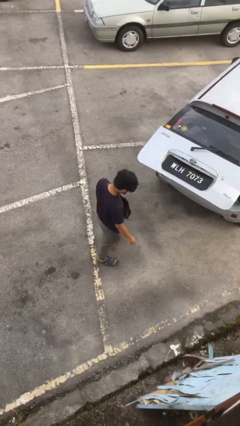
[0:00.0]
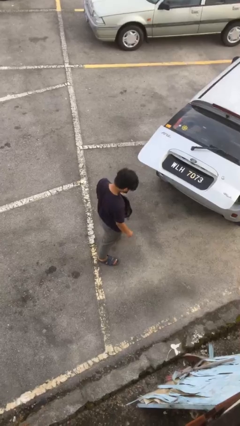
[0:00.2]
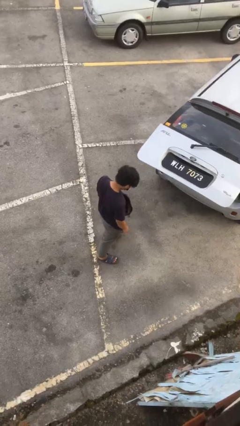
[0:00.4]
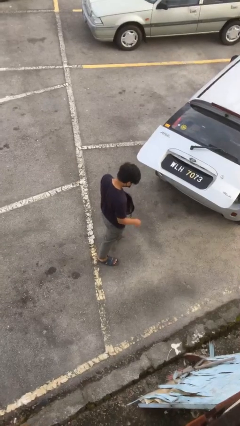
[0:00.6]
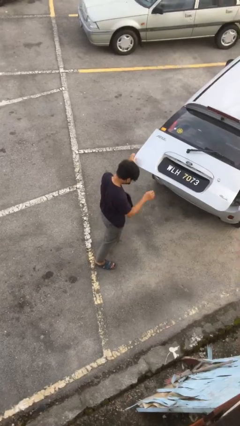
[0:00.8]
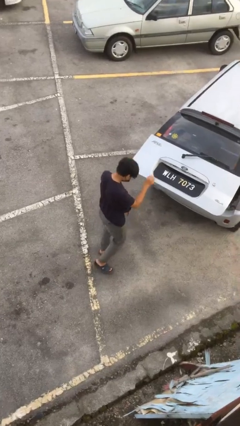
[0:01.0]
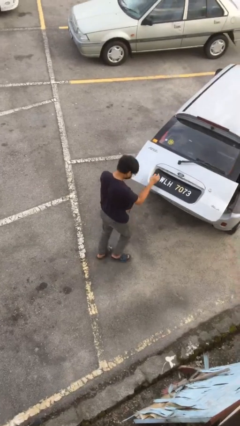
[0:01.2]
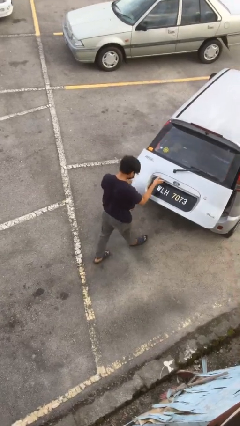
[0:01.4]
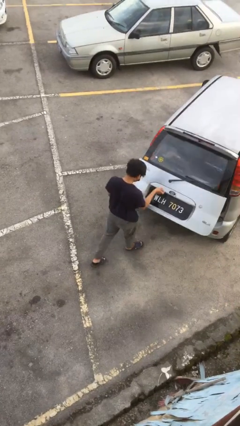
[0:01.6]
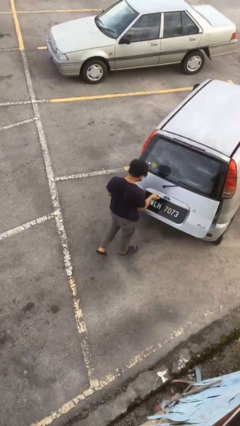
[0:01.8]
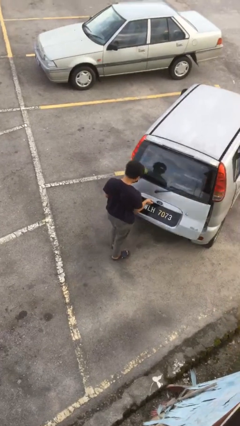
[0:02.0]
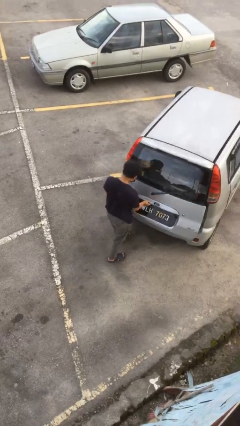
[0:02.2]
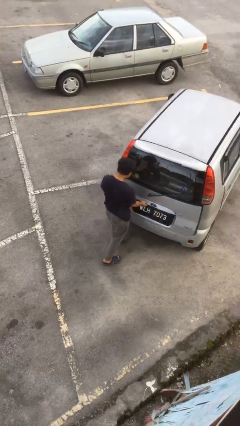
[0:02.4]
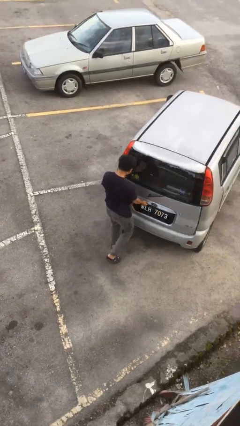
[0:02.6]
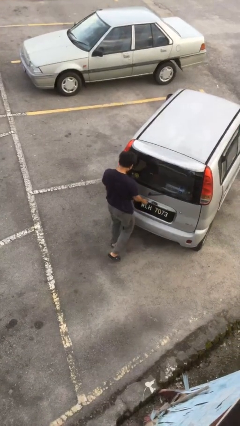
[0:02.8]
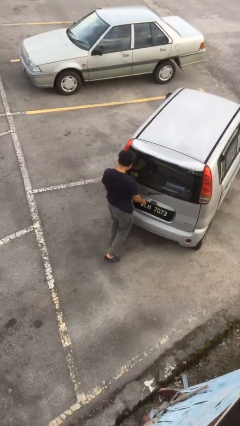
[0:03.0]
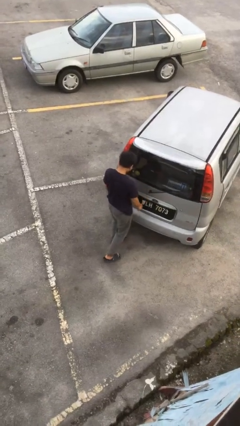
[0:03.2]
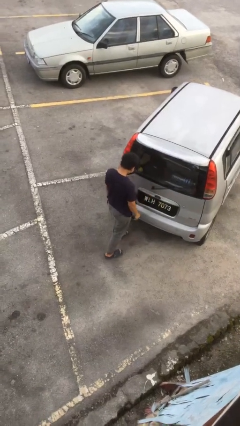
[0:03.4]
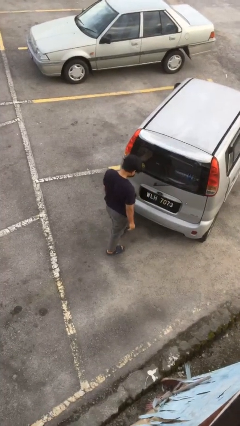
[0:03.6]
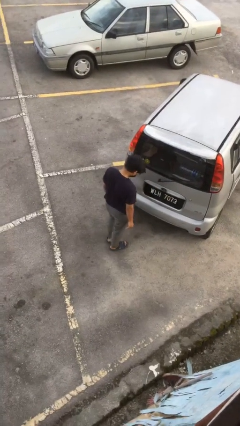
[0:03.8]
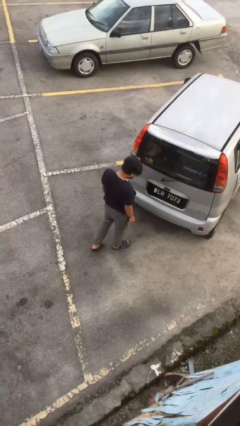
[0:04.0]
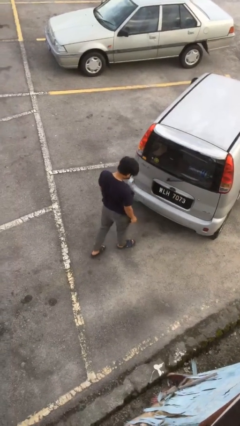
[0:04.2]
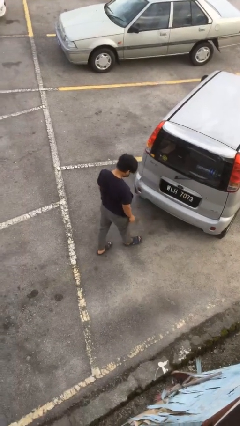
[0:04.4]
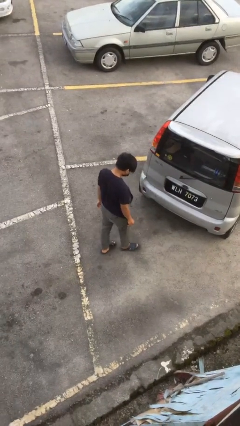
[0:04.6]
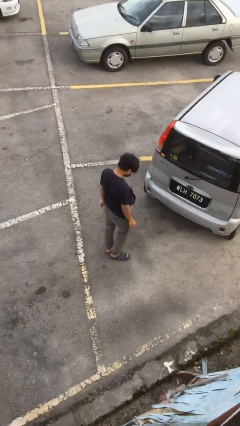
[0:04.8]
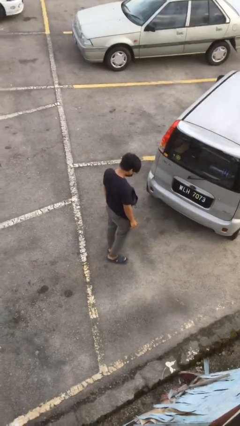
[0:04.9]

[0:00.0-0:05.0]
person closes car trunk

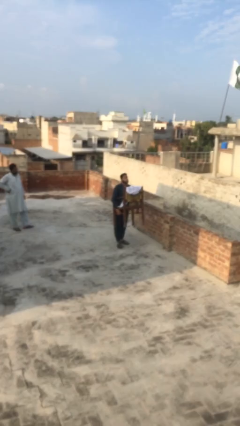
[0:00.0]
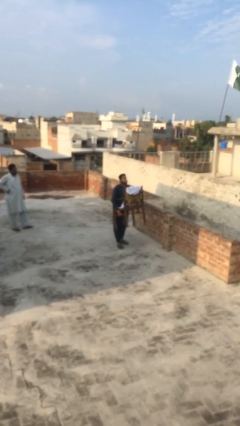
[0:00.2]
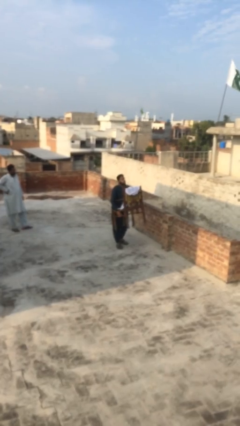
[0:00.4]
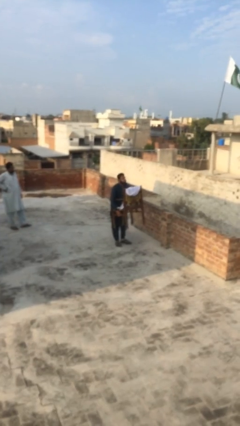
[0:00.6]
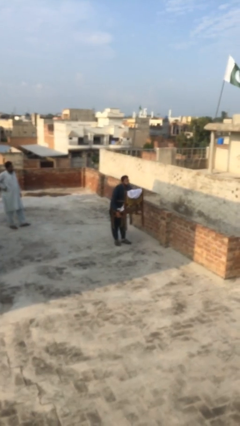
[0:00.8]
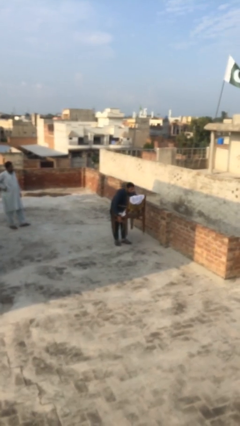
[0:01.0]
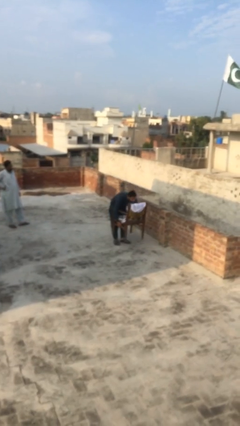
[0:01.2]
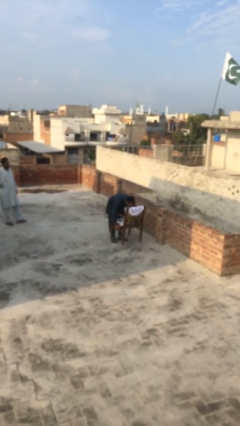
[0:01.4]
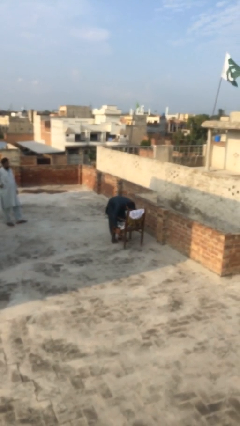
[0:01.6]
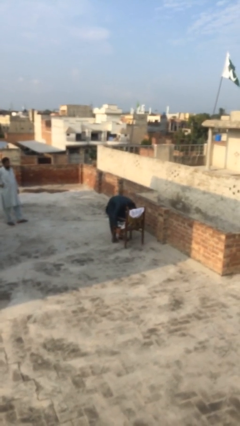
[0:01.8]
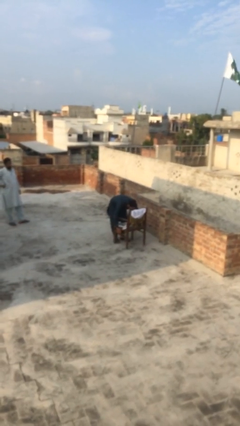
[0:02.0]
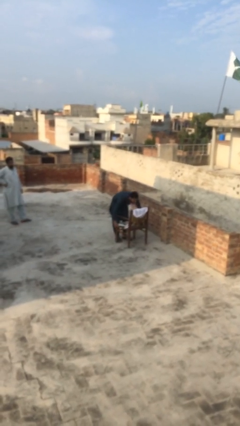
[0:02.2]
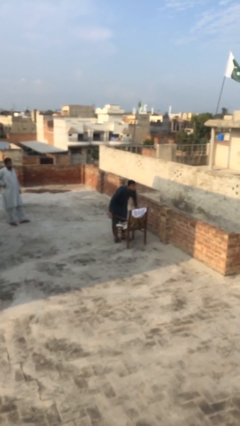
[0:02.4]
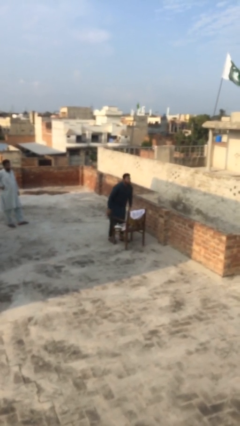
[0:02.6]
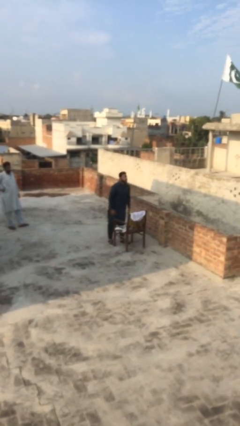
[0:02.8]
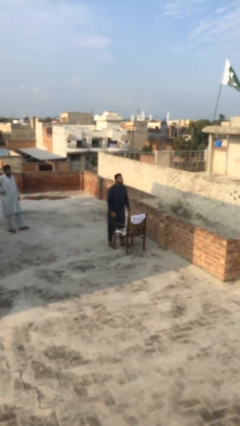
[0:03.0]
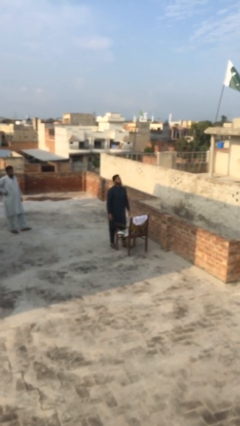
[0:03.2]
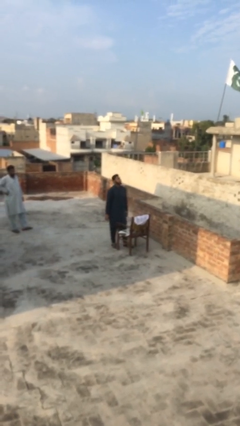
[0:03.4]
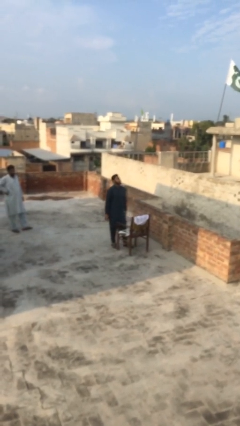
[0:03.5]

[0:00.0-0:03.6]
person puts down object on floor

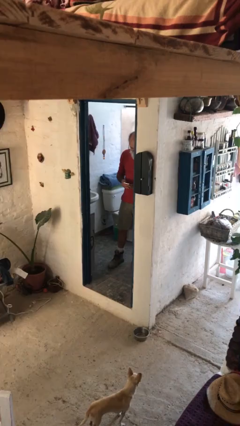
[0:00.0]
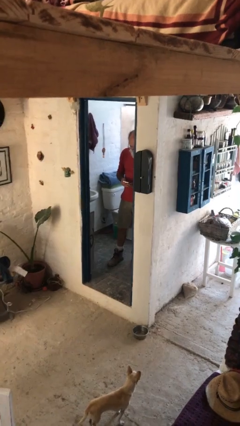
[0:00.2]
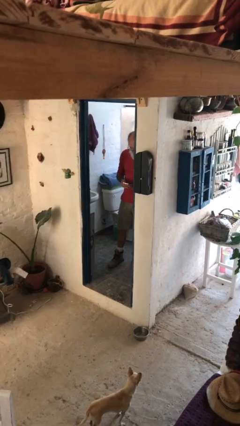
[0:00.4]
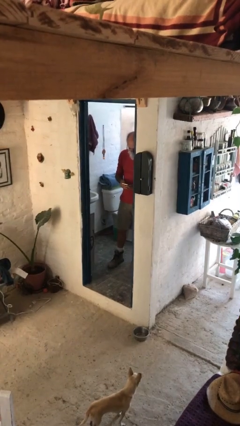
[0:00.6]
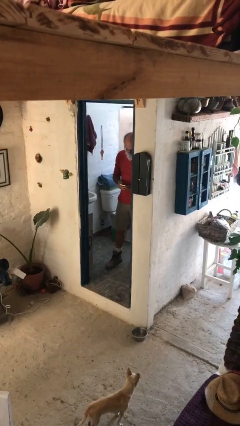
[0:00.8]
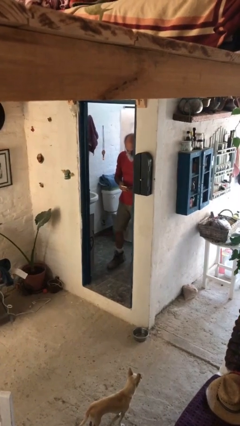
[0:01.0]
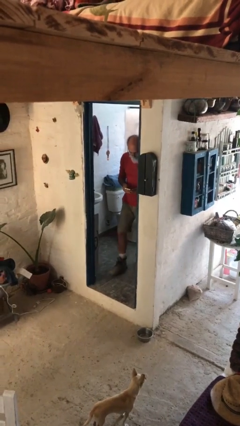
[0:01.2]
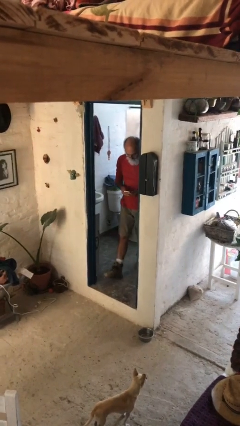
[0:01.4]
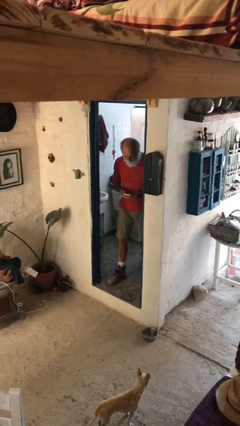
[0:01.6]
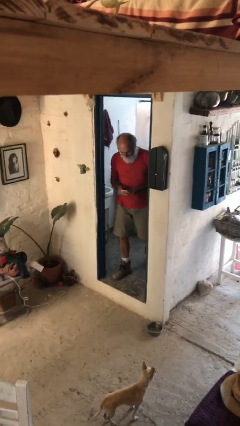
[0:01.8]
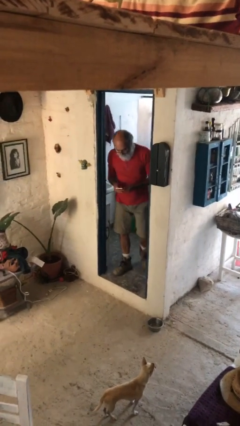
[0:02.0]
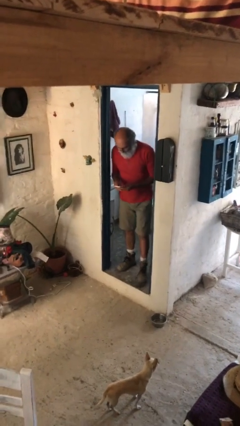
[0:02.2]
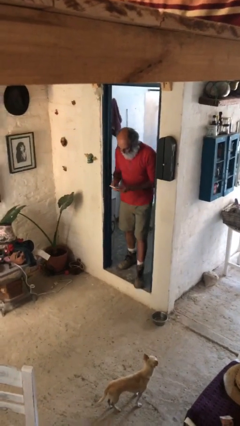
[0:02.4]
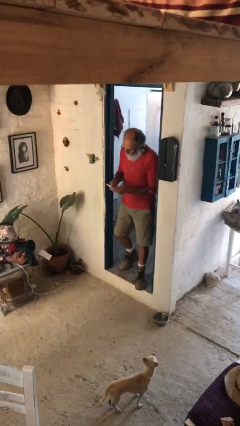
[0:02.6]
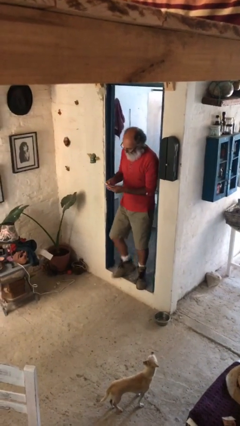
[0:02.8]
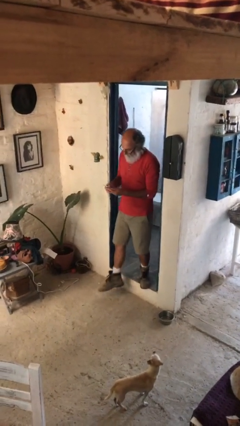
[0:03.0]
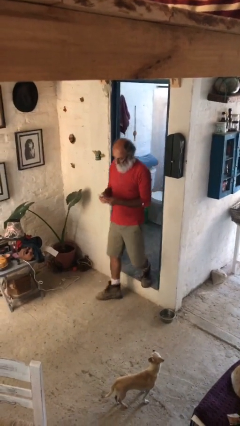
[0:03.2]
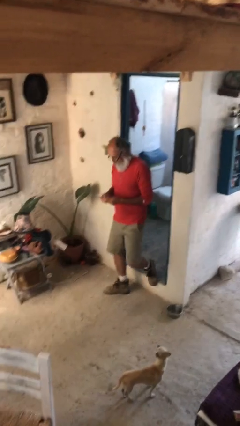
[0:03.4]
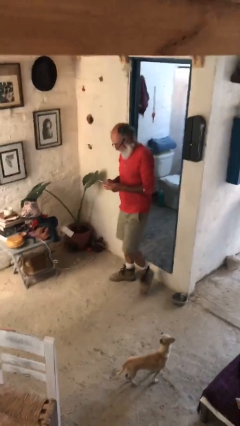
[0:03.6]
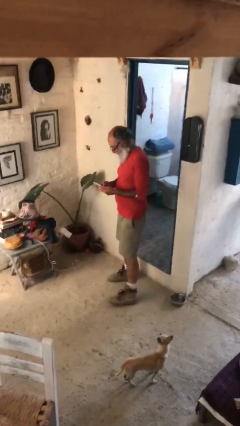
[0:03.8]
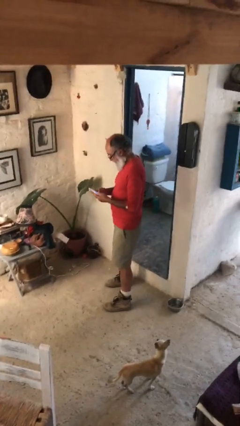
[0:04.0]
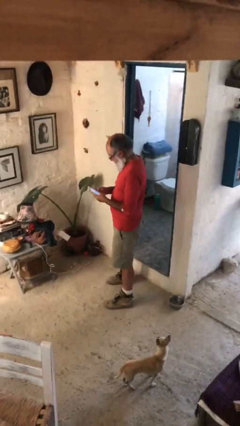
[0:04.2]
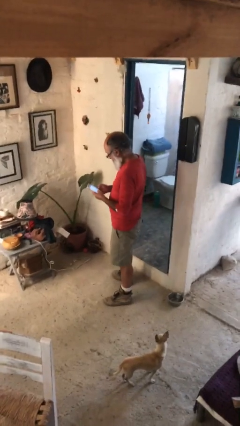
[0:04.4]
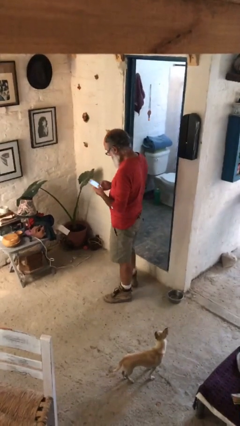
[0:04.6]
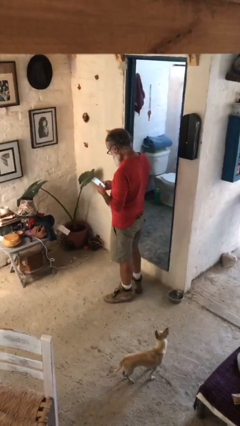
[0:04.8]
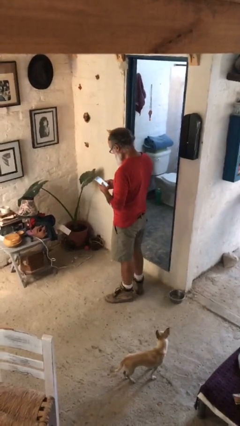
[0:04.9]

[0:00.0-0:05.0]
person enters scene through structure

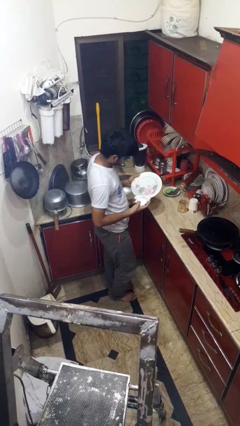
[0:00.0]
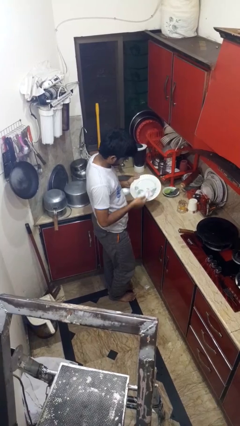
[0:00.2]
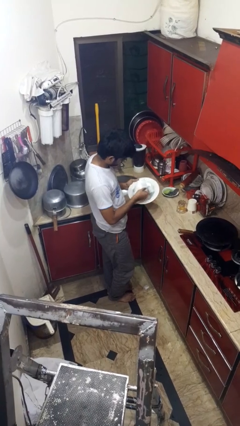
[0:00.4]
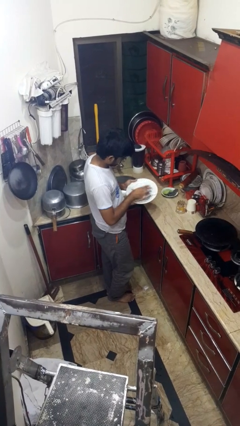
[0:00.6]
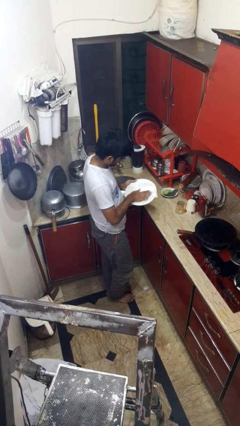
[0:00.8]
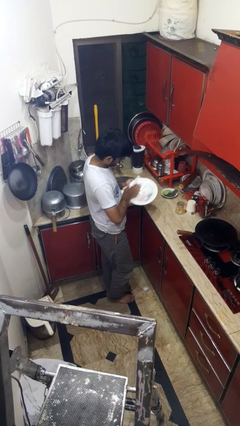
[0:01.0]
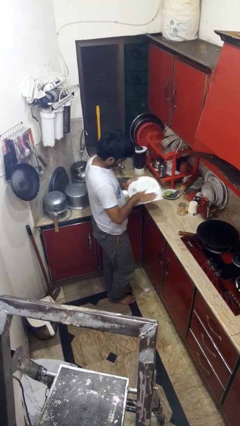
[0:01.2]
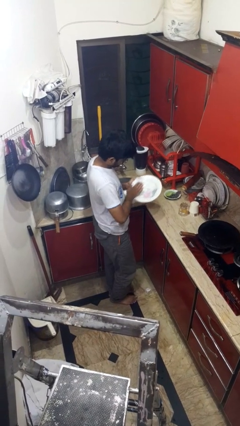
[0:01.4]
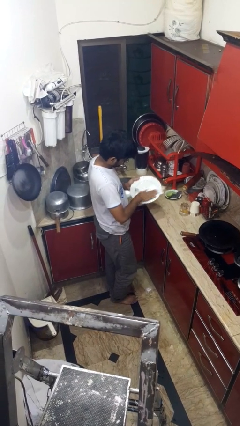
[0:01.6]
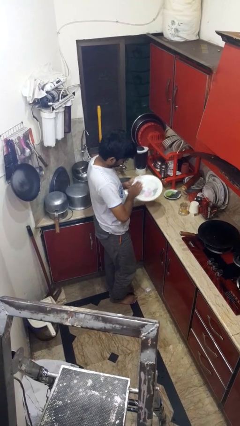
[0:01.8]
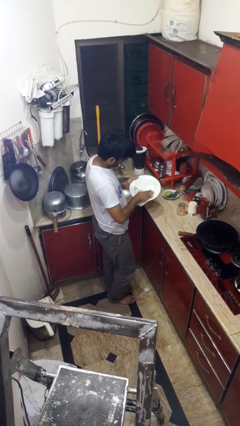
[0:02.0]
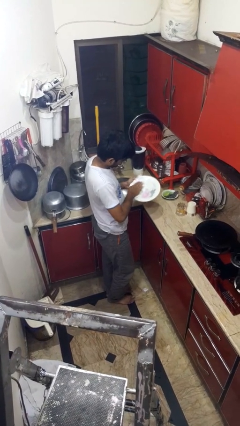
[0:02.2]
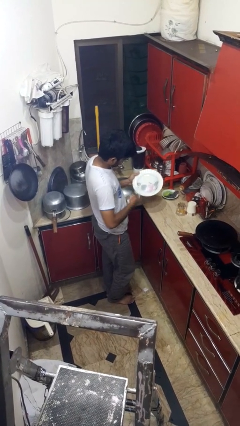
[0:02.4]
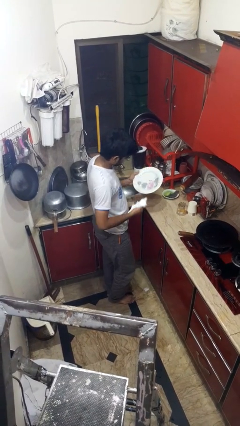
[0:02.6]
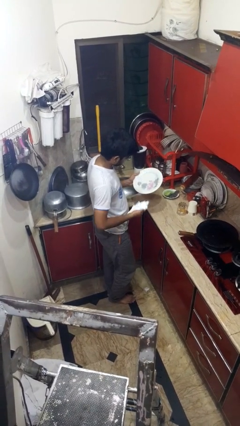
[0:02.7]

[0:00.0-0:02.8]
person dries dish

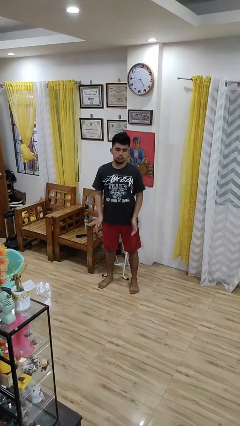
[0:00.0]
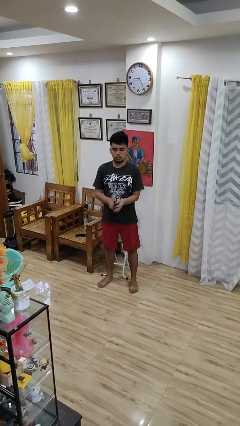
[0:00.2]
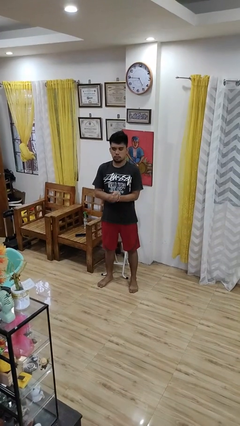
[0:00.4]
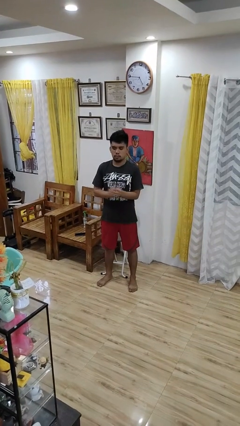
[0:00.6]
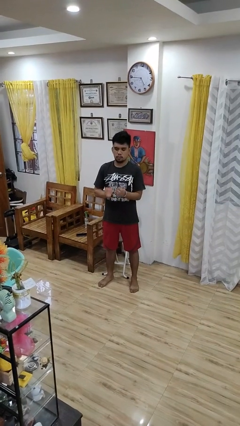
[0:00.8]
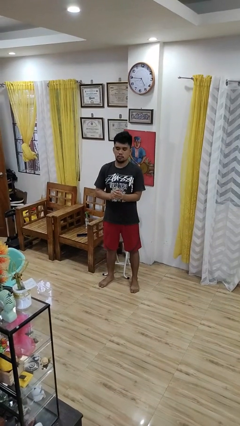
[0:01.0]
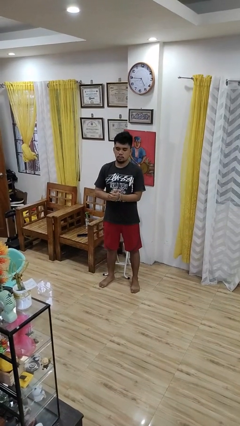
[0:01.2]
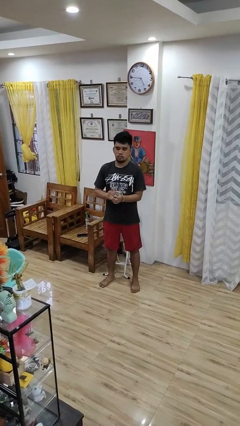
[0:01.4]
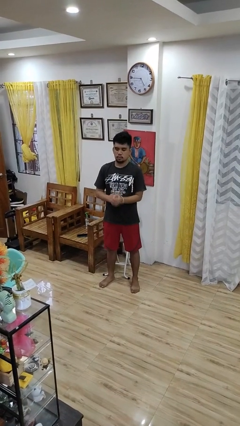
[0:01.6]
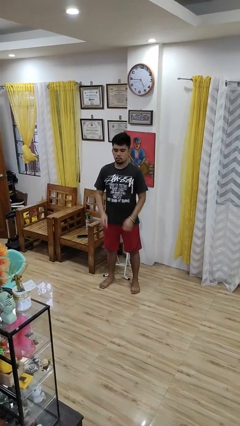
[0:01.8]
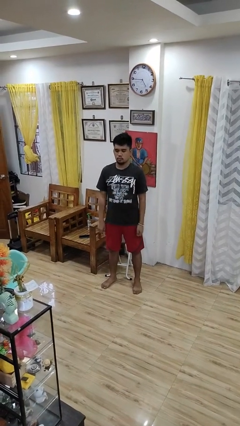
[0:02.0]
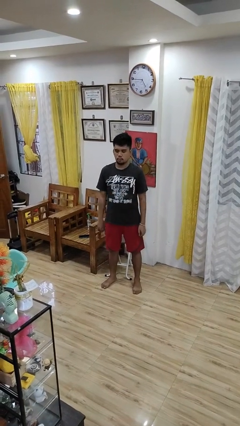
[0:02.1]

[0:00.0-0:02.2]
person claps hands
